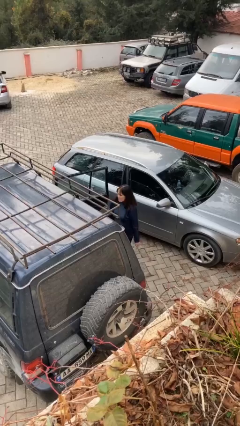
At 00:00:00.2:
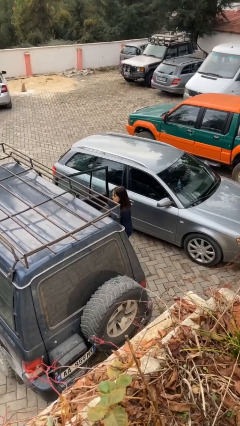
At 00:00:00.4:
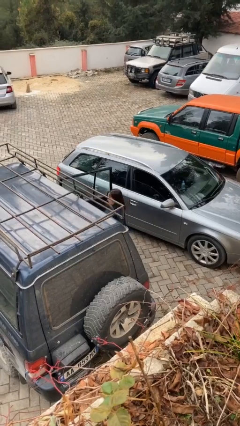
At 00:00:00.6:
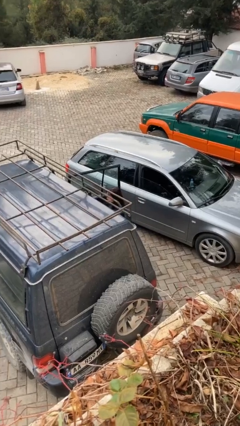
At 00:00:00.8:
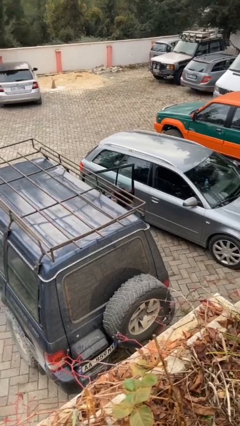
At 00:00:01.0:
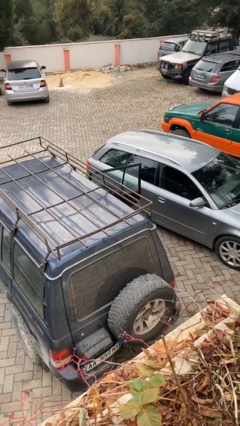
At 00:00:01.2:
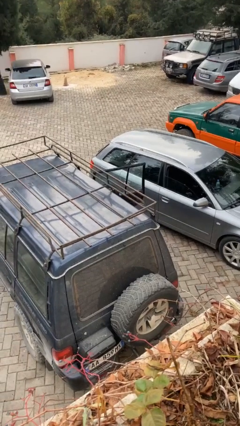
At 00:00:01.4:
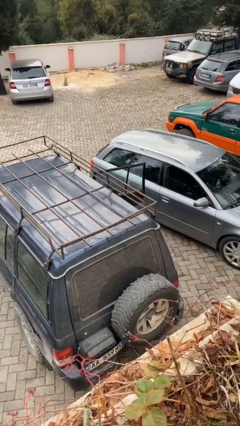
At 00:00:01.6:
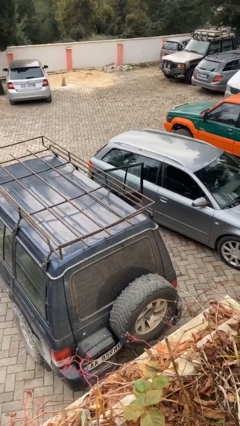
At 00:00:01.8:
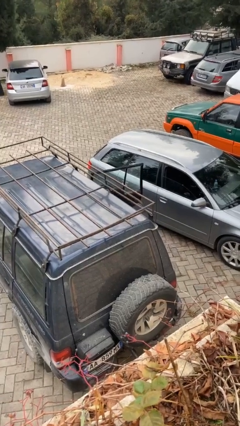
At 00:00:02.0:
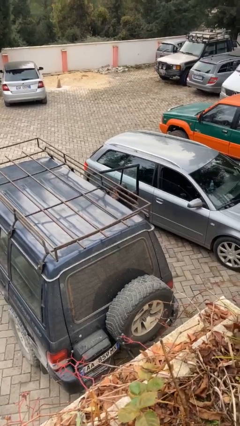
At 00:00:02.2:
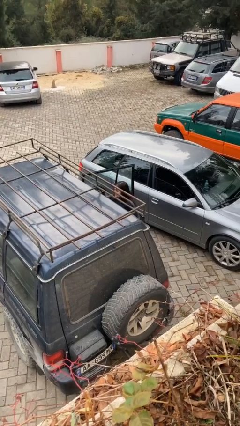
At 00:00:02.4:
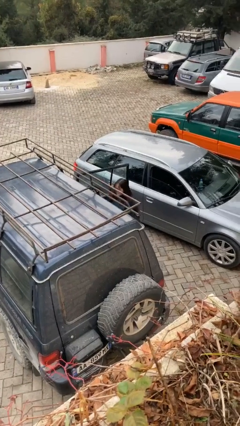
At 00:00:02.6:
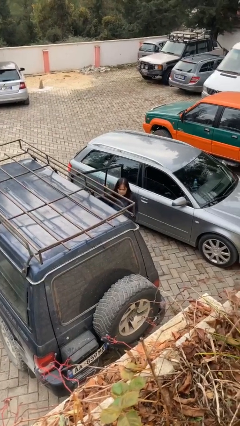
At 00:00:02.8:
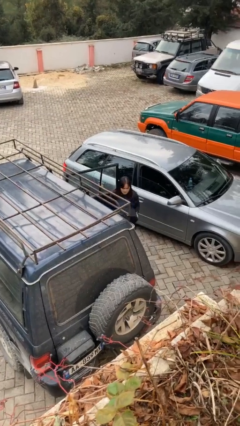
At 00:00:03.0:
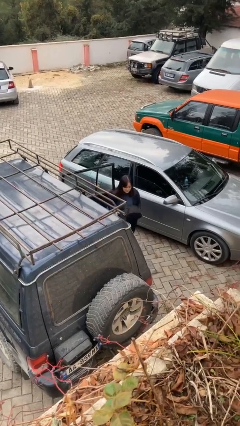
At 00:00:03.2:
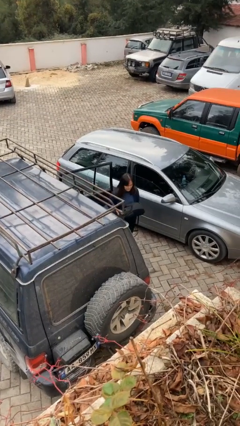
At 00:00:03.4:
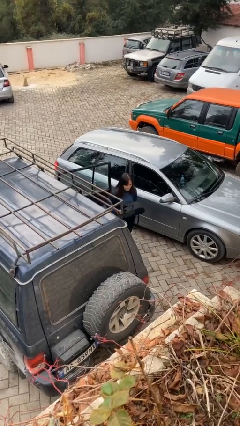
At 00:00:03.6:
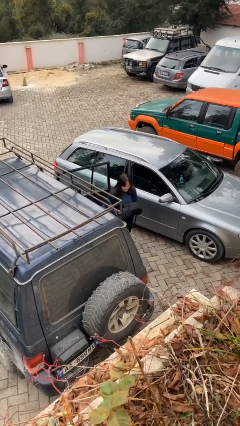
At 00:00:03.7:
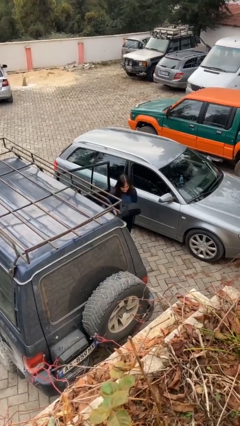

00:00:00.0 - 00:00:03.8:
person unloads car

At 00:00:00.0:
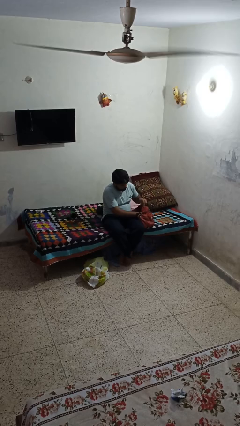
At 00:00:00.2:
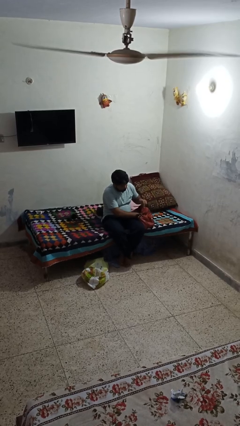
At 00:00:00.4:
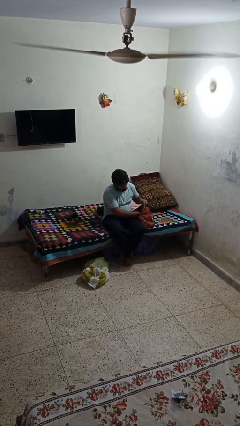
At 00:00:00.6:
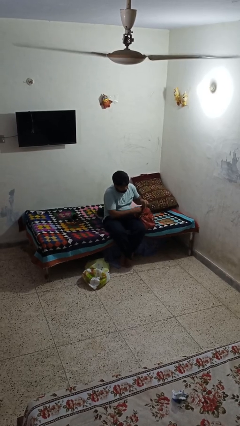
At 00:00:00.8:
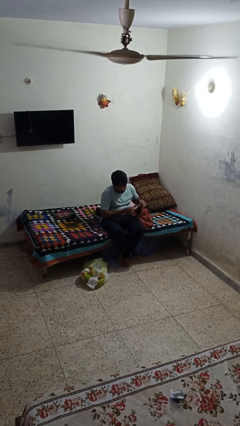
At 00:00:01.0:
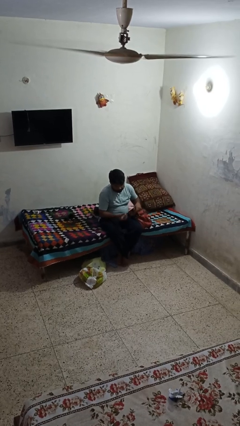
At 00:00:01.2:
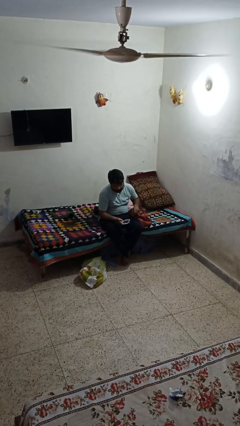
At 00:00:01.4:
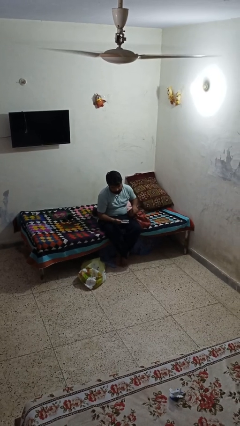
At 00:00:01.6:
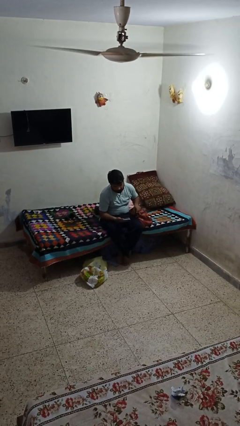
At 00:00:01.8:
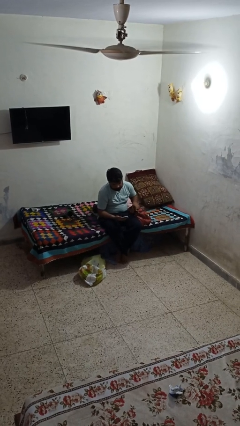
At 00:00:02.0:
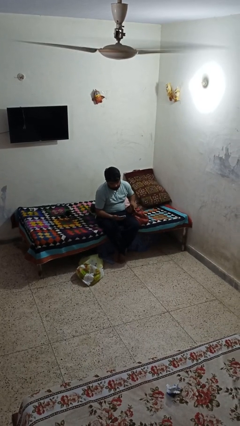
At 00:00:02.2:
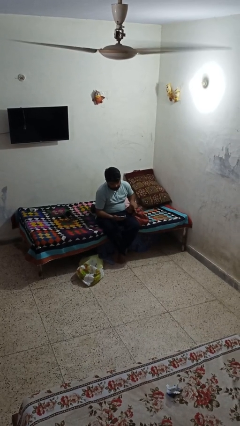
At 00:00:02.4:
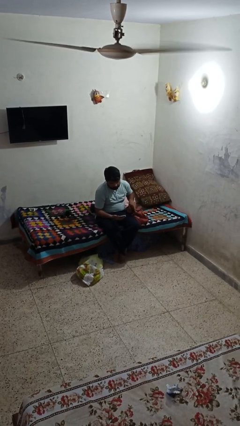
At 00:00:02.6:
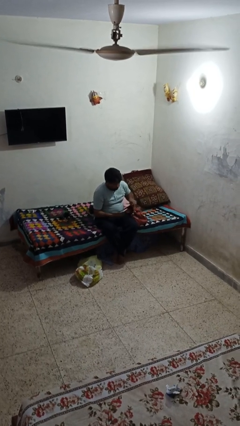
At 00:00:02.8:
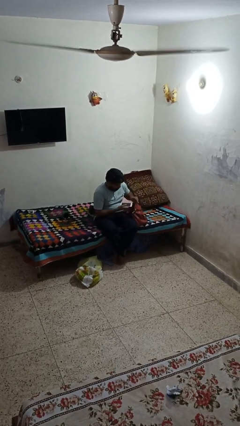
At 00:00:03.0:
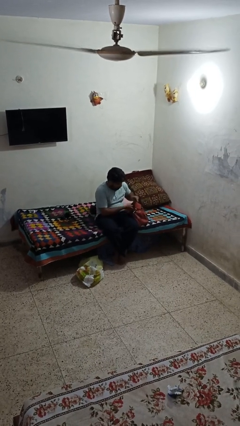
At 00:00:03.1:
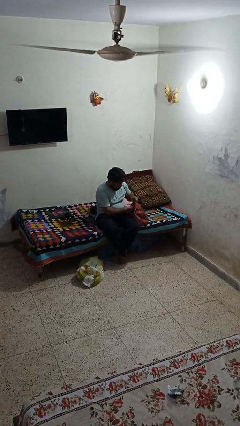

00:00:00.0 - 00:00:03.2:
person takes object from purse

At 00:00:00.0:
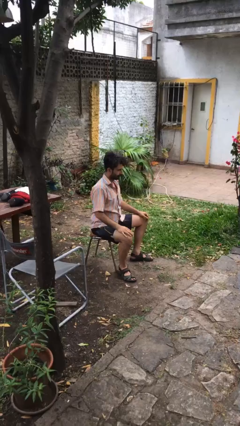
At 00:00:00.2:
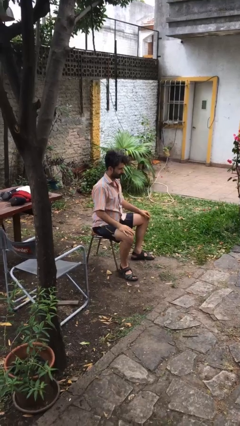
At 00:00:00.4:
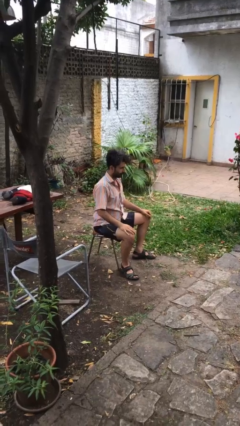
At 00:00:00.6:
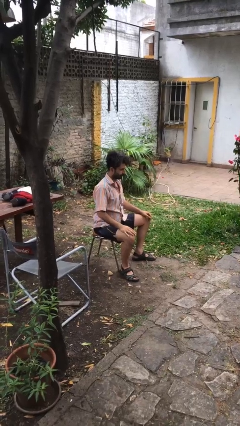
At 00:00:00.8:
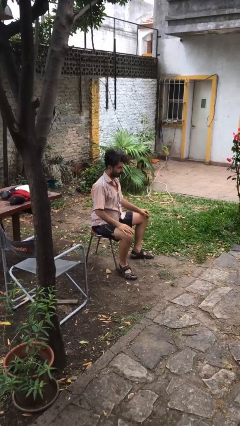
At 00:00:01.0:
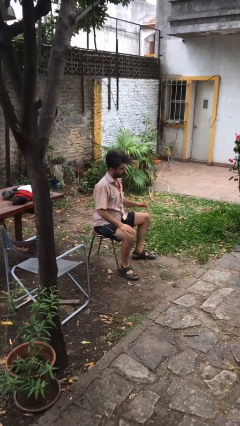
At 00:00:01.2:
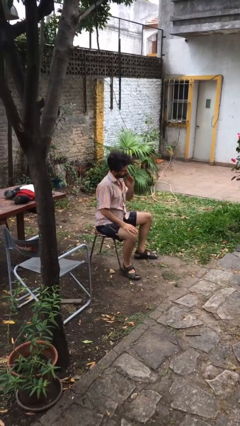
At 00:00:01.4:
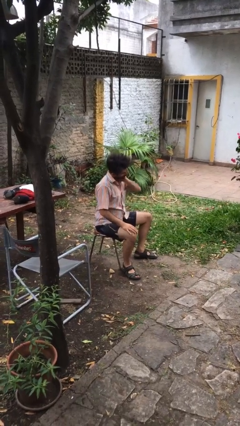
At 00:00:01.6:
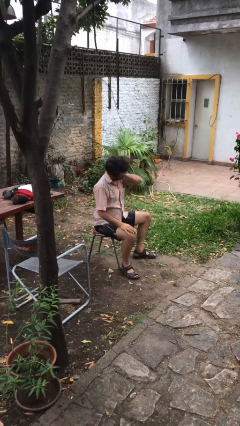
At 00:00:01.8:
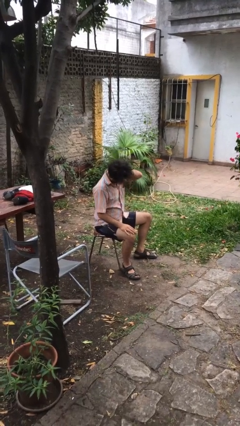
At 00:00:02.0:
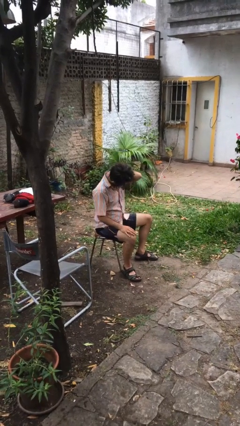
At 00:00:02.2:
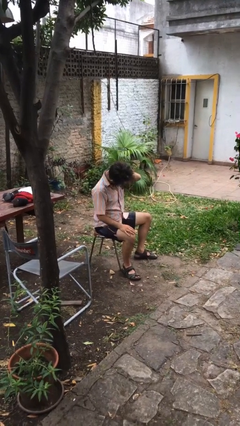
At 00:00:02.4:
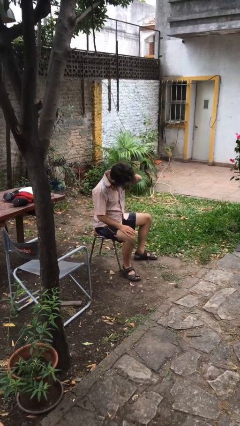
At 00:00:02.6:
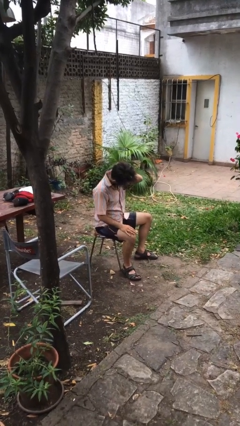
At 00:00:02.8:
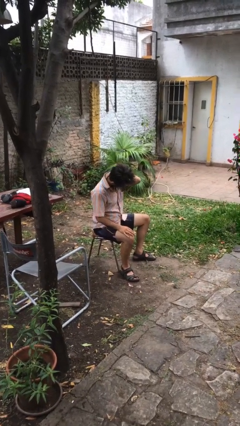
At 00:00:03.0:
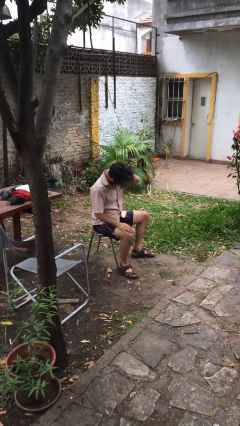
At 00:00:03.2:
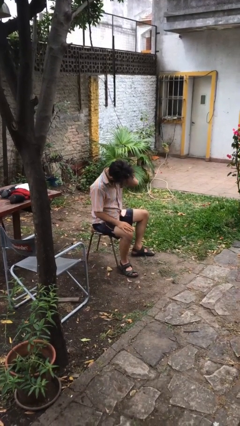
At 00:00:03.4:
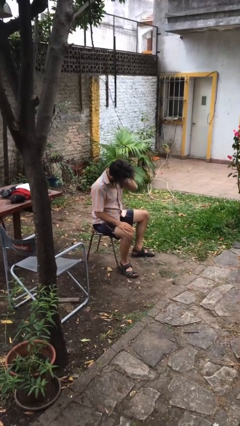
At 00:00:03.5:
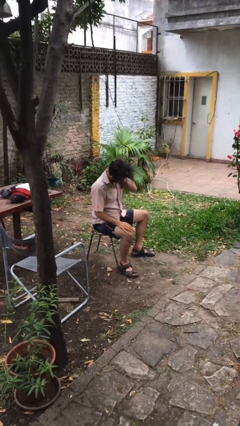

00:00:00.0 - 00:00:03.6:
person rubs neck

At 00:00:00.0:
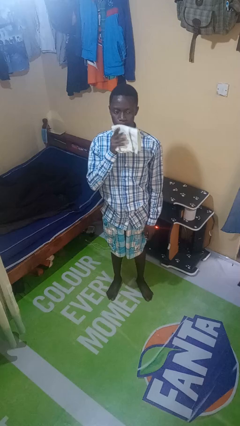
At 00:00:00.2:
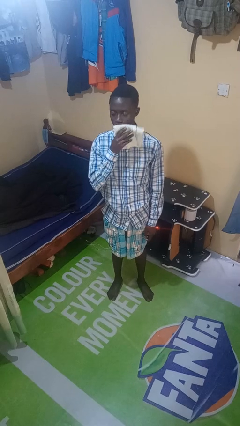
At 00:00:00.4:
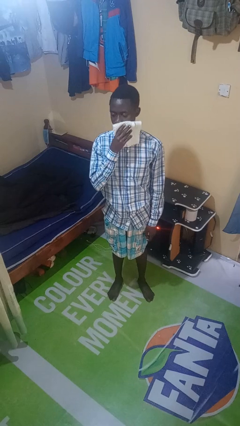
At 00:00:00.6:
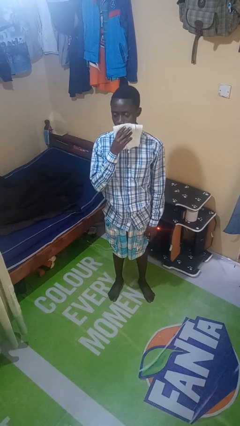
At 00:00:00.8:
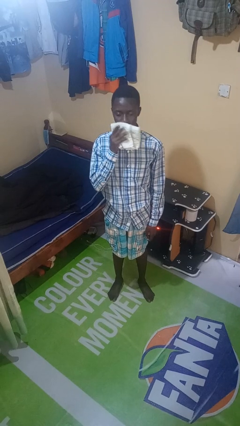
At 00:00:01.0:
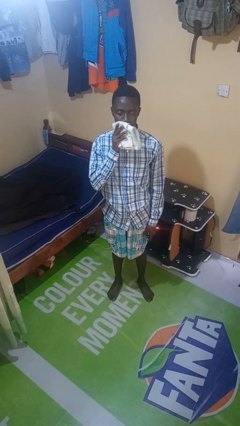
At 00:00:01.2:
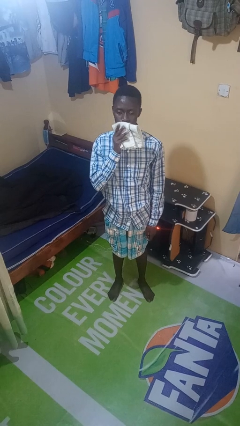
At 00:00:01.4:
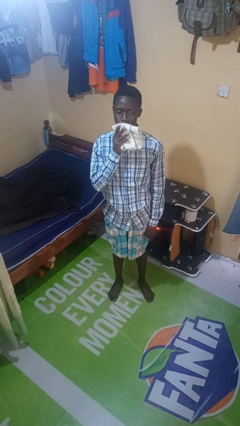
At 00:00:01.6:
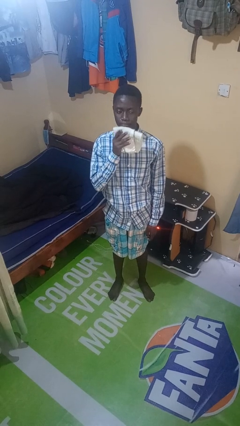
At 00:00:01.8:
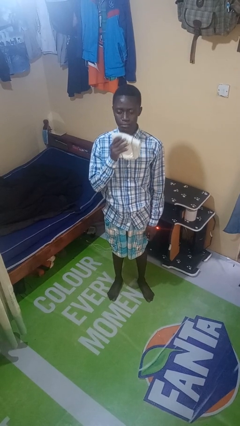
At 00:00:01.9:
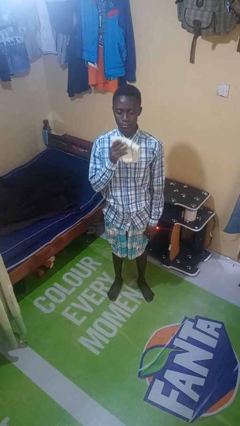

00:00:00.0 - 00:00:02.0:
person wipes mouth with napkin

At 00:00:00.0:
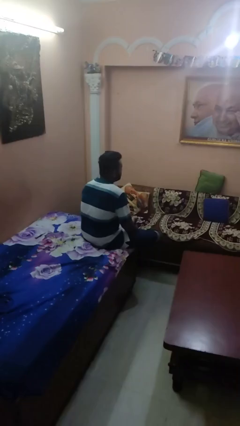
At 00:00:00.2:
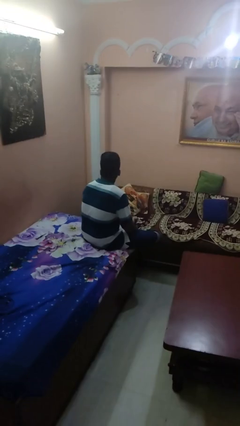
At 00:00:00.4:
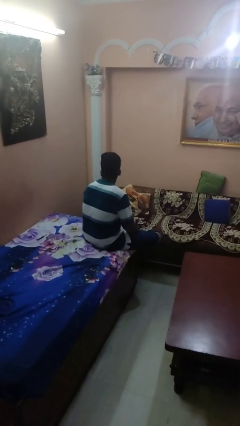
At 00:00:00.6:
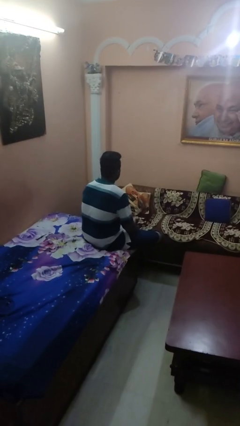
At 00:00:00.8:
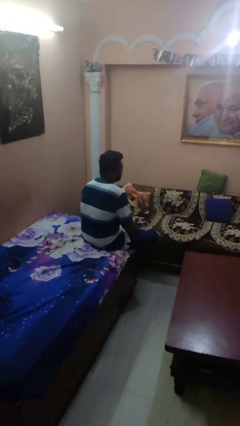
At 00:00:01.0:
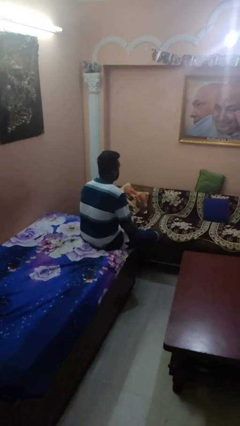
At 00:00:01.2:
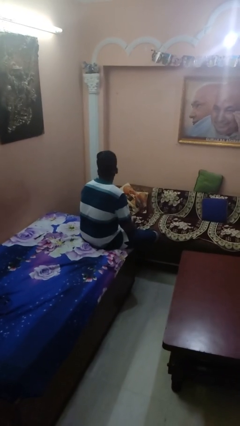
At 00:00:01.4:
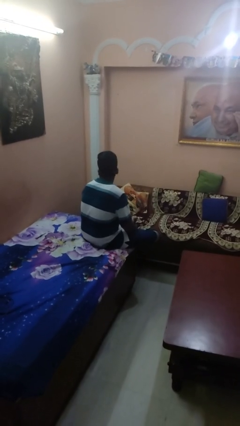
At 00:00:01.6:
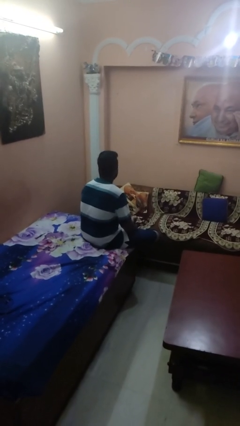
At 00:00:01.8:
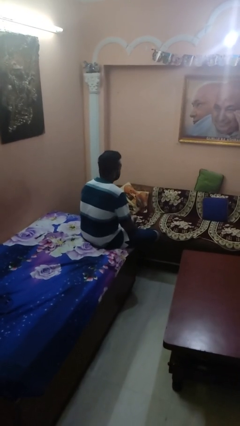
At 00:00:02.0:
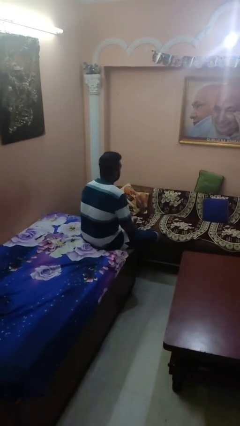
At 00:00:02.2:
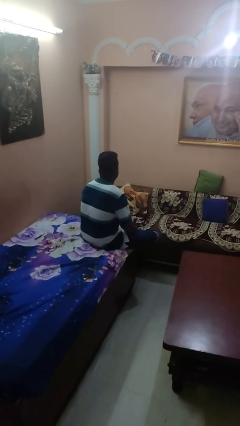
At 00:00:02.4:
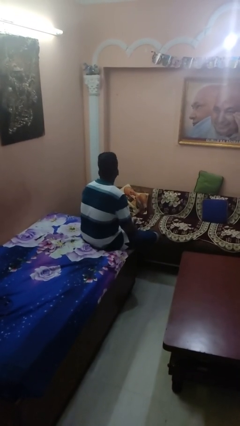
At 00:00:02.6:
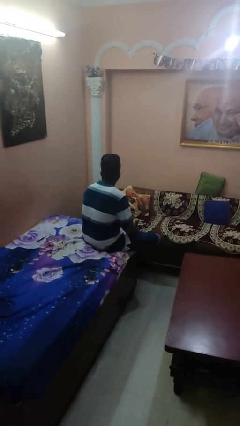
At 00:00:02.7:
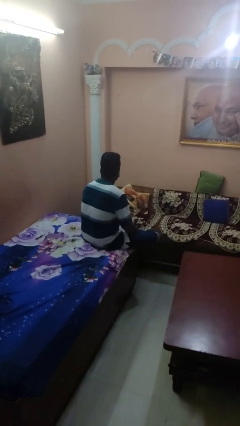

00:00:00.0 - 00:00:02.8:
person shakes head

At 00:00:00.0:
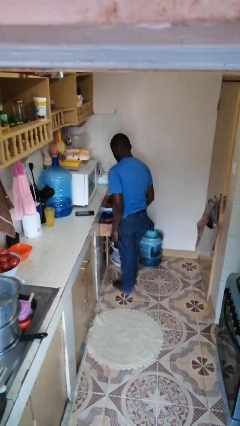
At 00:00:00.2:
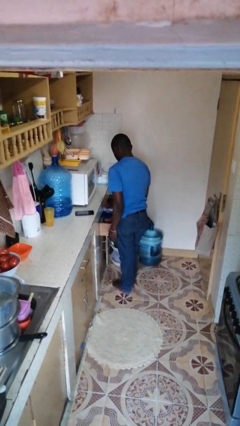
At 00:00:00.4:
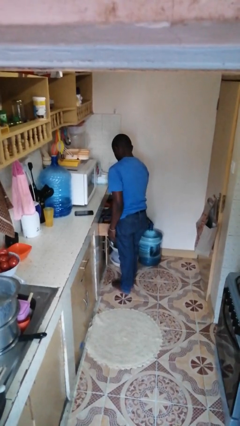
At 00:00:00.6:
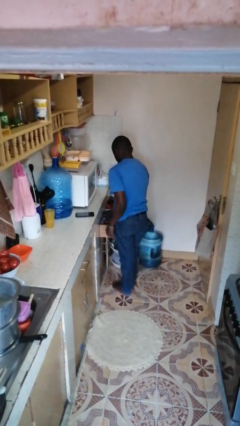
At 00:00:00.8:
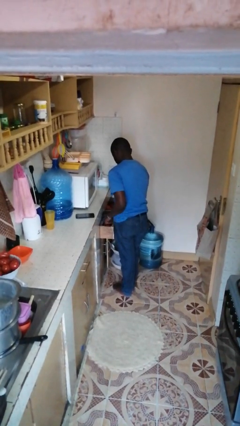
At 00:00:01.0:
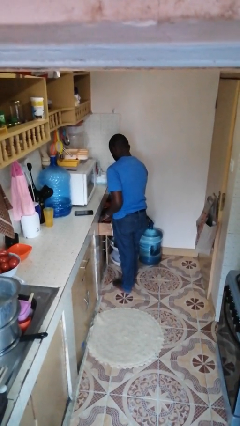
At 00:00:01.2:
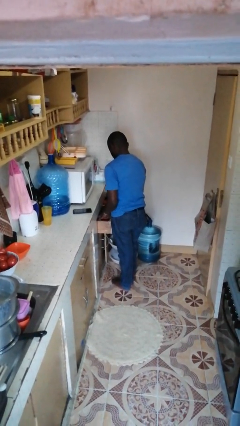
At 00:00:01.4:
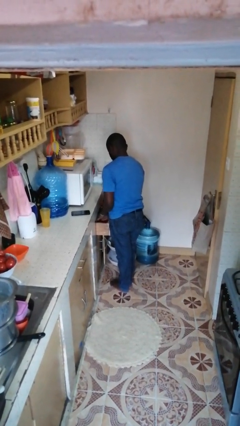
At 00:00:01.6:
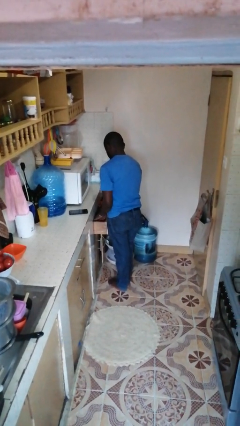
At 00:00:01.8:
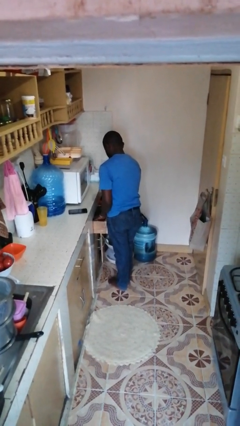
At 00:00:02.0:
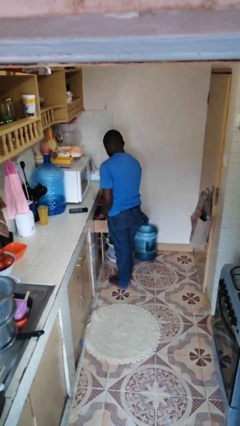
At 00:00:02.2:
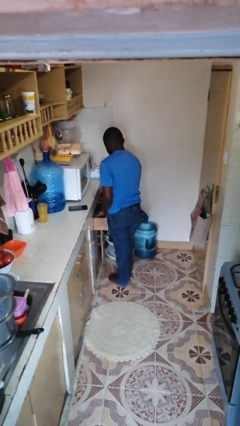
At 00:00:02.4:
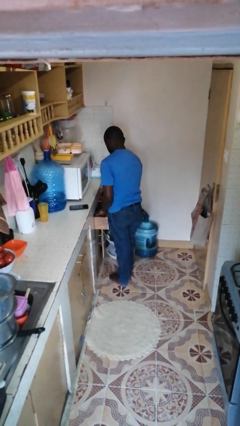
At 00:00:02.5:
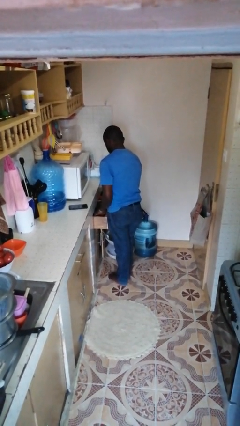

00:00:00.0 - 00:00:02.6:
person searches in kitchen drawer
